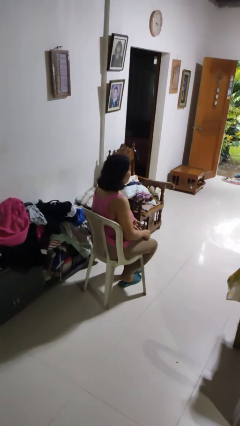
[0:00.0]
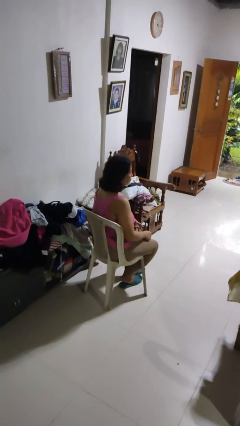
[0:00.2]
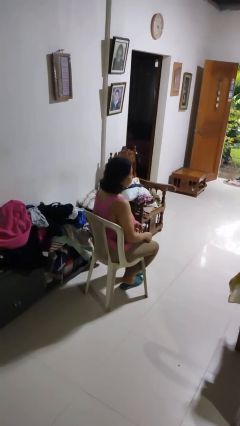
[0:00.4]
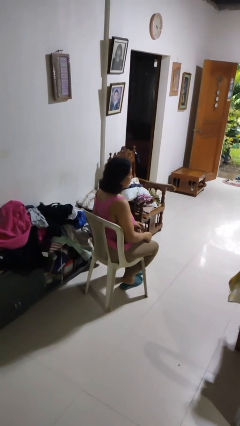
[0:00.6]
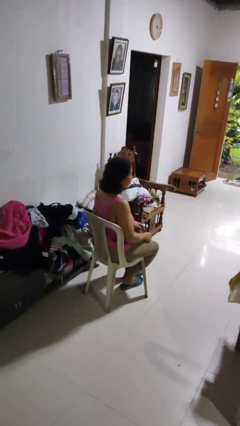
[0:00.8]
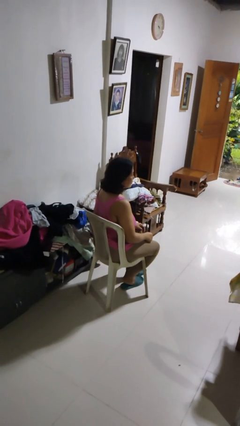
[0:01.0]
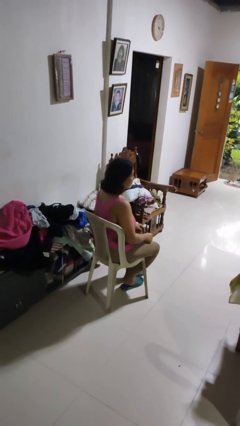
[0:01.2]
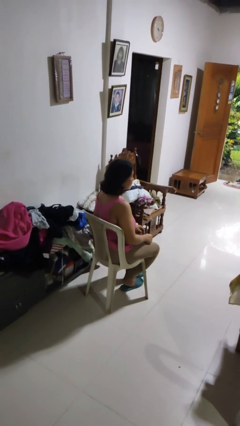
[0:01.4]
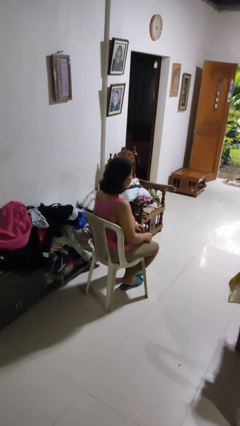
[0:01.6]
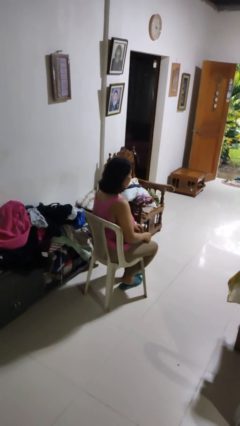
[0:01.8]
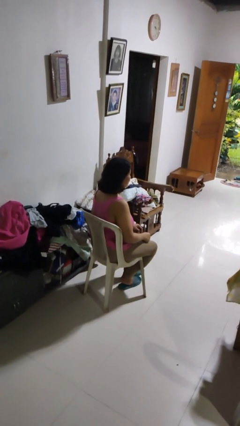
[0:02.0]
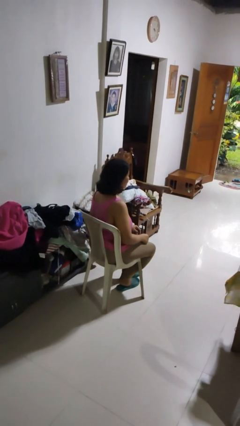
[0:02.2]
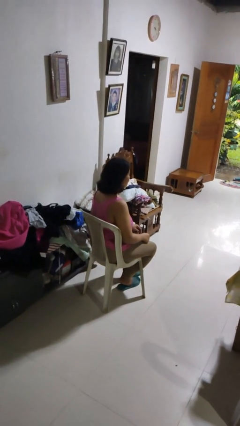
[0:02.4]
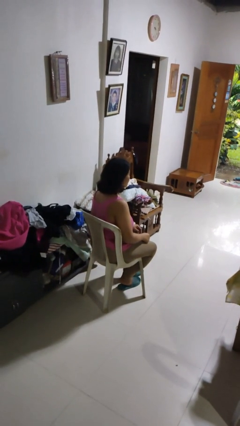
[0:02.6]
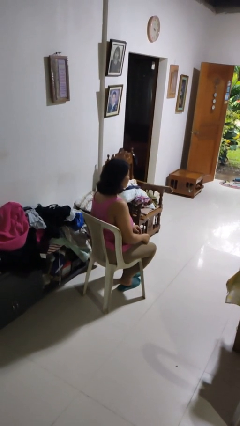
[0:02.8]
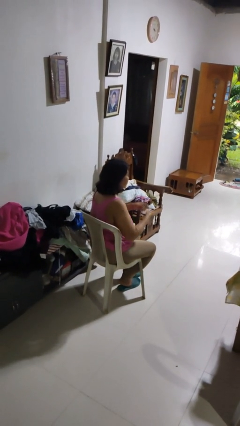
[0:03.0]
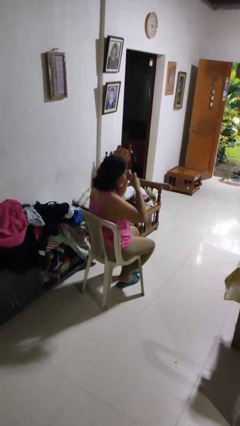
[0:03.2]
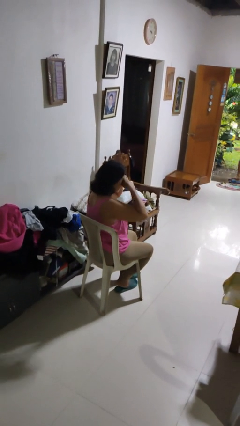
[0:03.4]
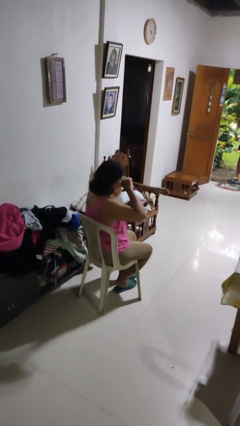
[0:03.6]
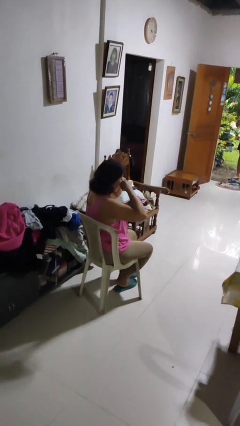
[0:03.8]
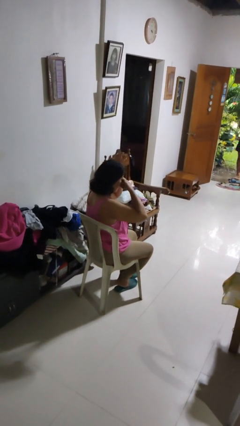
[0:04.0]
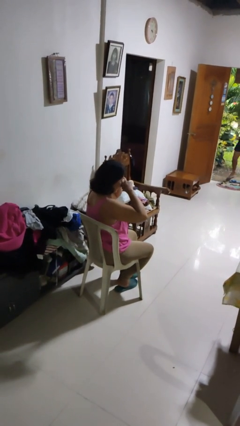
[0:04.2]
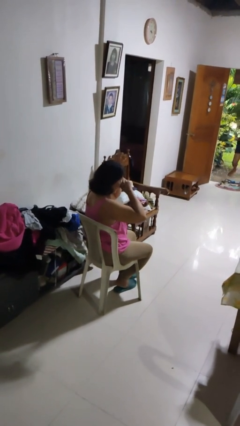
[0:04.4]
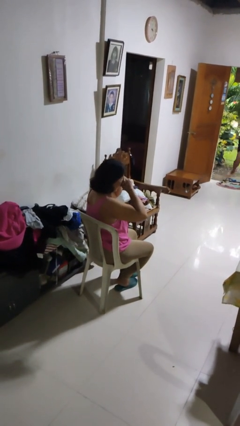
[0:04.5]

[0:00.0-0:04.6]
person rubs eyes

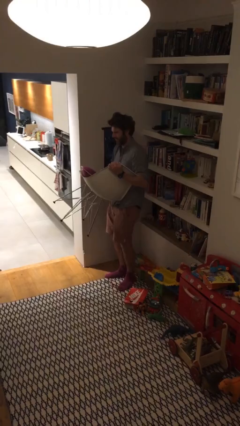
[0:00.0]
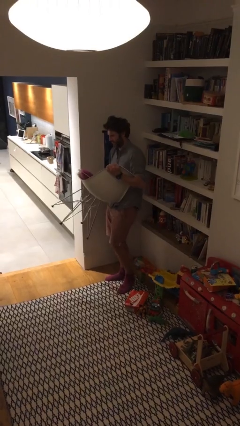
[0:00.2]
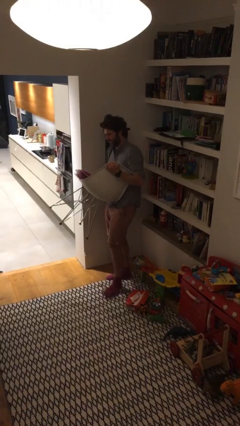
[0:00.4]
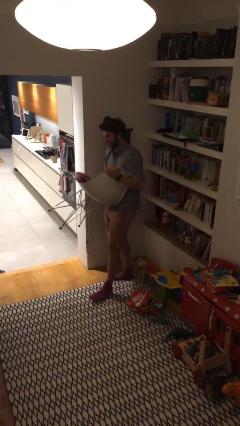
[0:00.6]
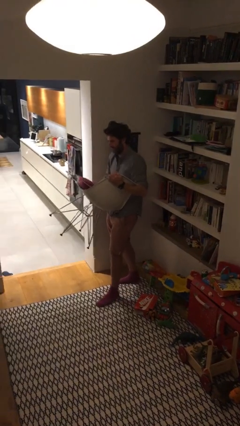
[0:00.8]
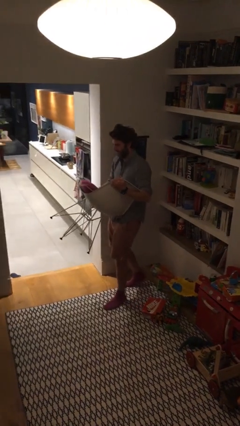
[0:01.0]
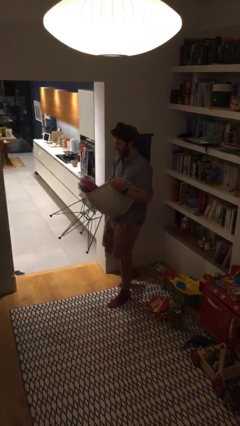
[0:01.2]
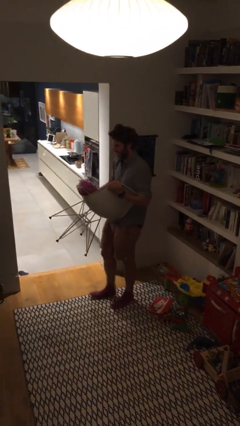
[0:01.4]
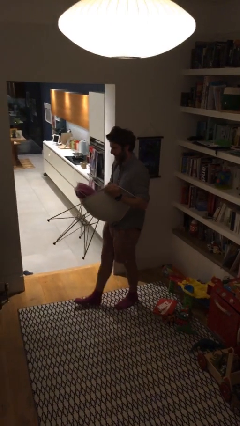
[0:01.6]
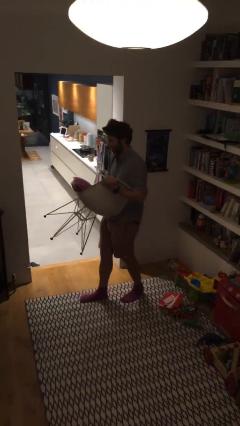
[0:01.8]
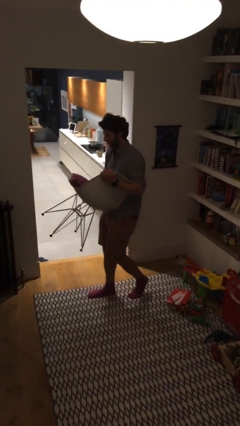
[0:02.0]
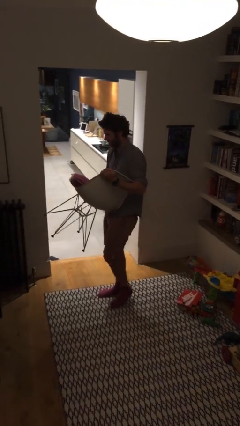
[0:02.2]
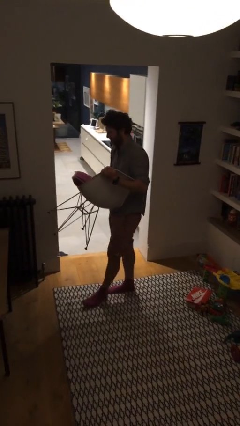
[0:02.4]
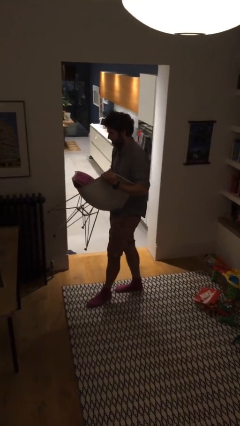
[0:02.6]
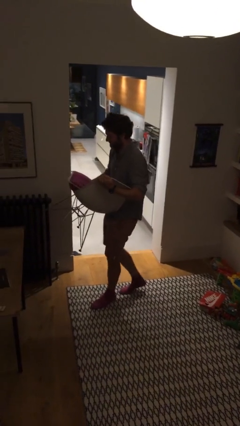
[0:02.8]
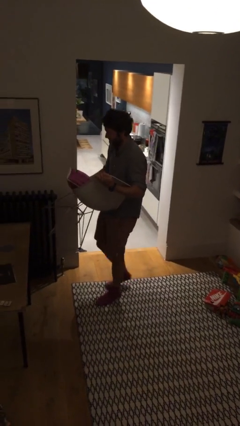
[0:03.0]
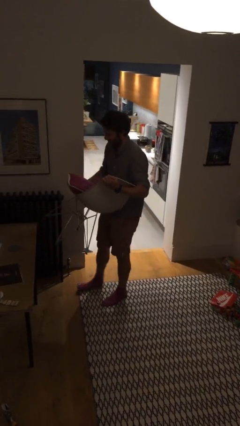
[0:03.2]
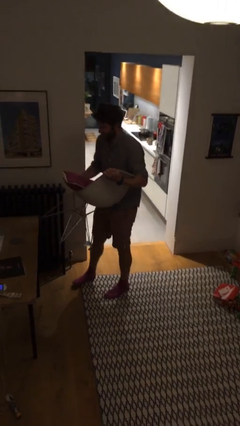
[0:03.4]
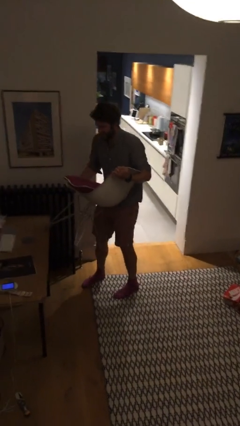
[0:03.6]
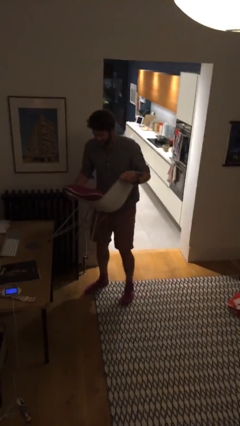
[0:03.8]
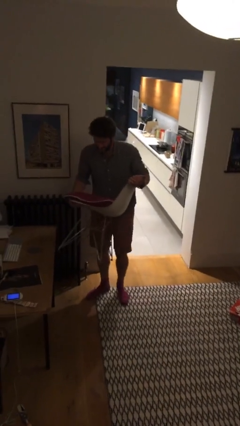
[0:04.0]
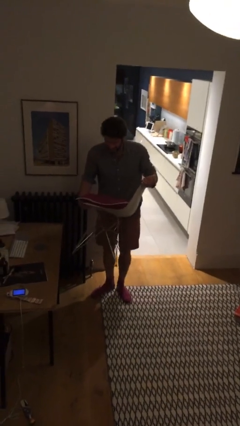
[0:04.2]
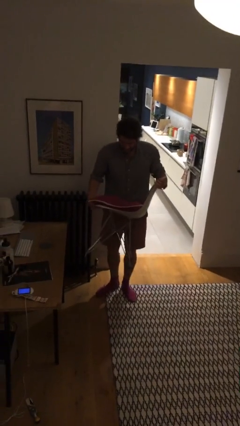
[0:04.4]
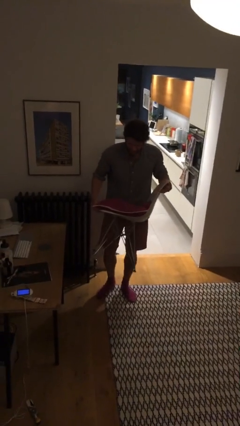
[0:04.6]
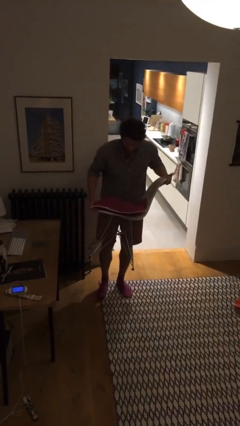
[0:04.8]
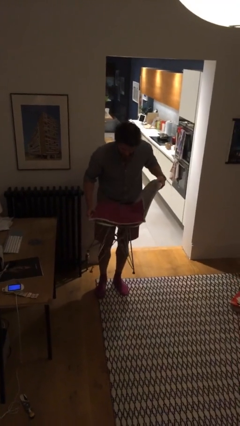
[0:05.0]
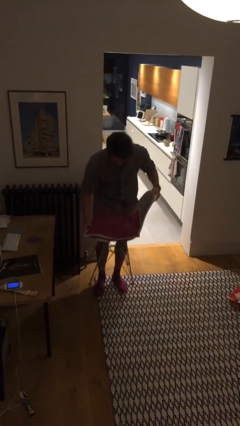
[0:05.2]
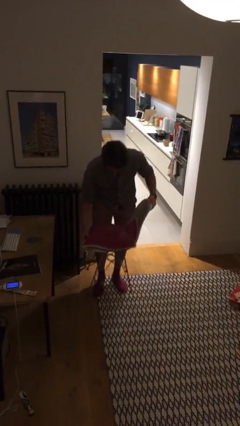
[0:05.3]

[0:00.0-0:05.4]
person carries heavy object

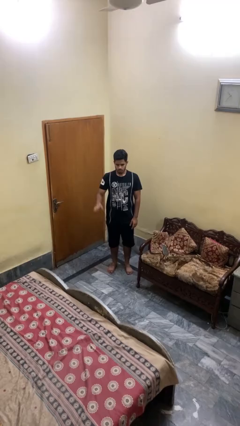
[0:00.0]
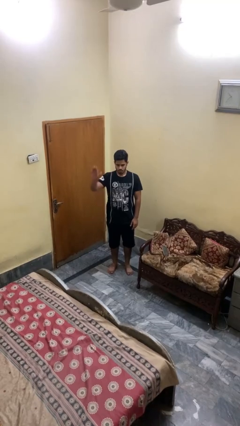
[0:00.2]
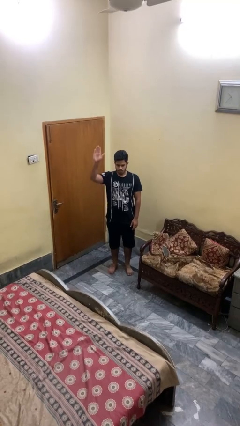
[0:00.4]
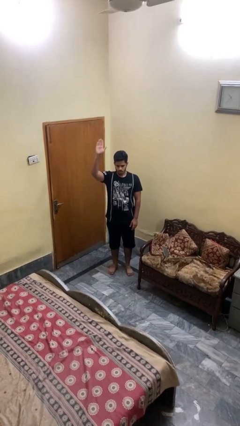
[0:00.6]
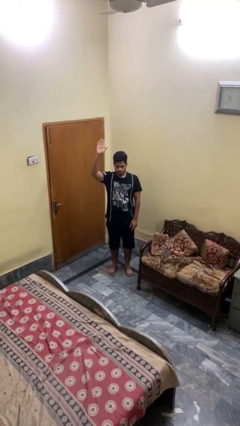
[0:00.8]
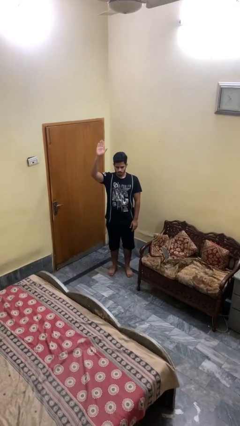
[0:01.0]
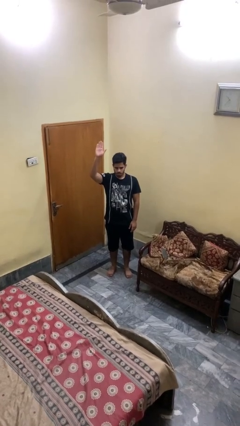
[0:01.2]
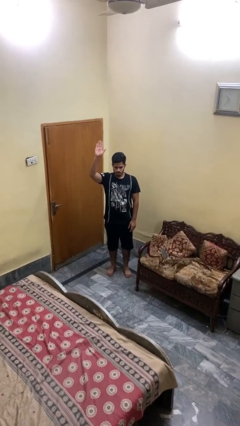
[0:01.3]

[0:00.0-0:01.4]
person gestures raise hand

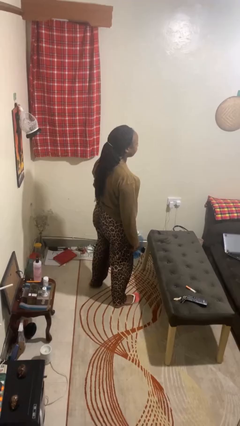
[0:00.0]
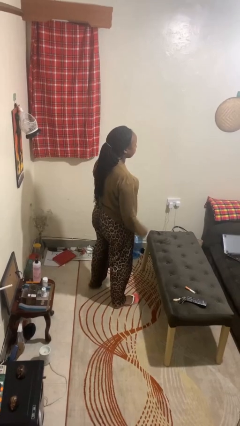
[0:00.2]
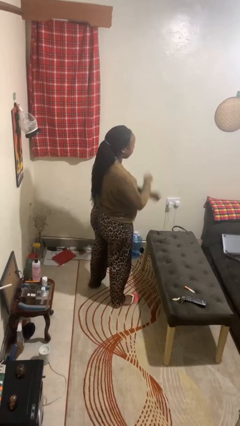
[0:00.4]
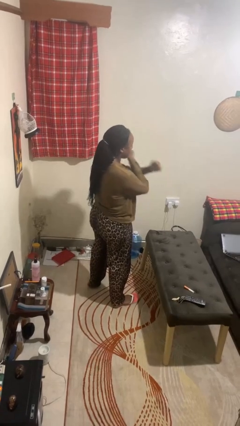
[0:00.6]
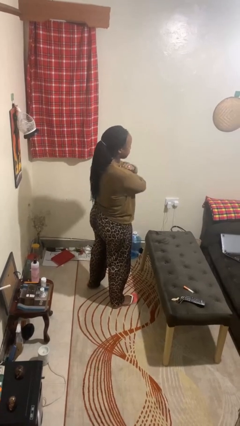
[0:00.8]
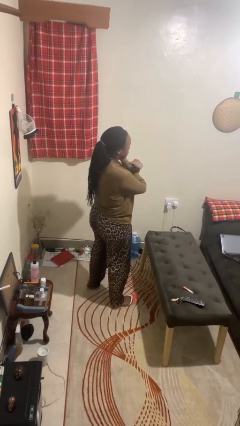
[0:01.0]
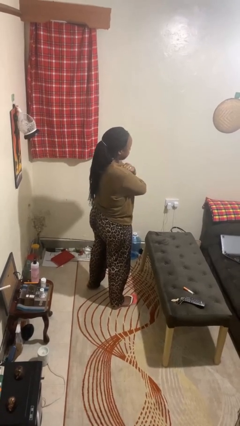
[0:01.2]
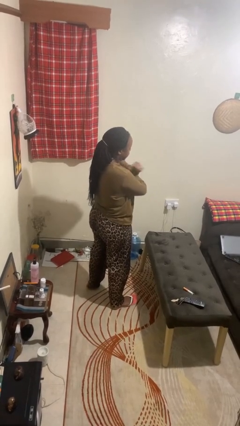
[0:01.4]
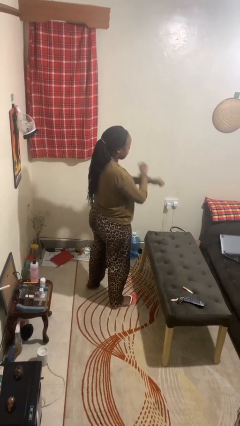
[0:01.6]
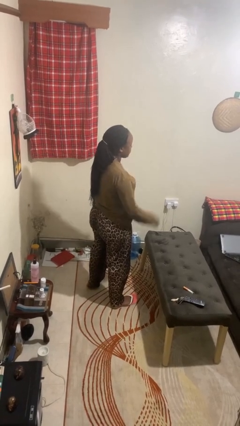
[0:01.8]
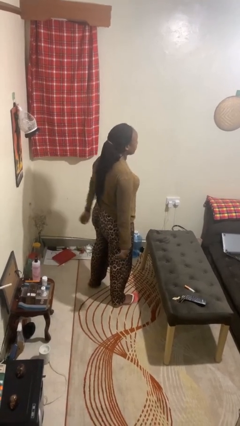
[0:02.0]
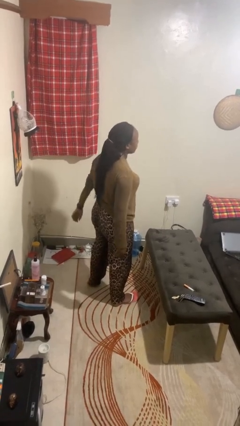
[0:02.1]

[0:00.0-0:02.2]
person gestures arms x

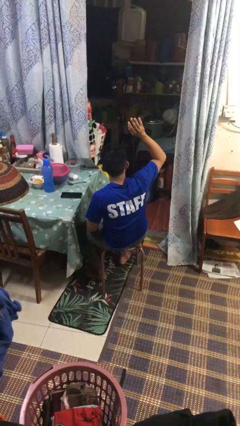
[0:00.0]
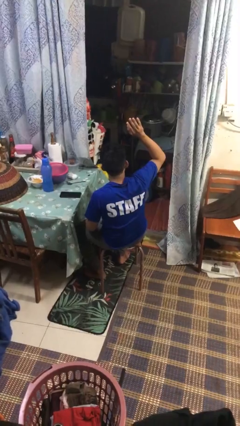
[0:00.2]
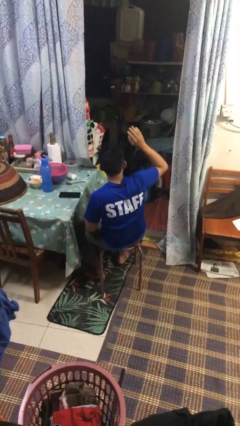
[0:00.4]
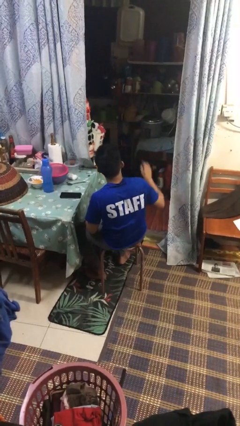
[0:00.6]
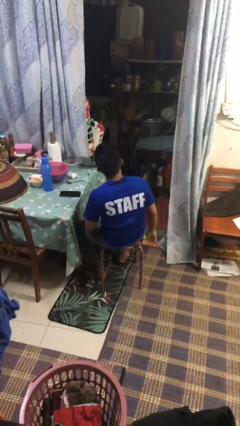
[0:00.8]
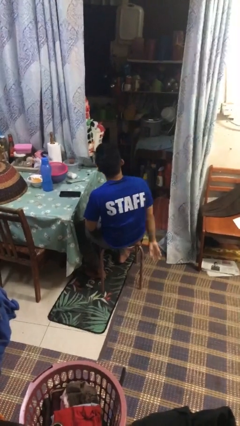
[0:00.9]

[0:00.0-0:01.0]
person gestures lower hand

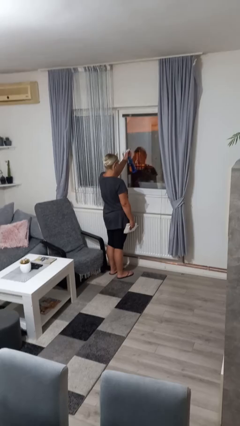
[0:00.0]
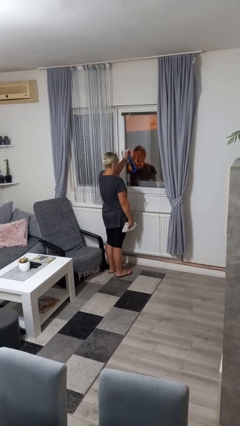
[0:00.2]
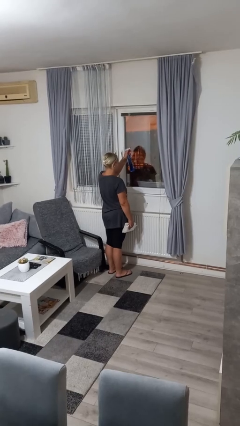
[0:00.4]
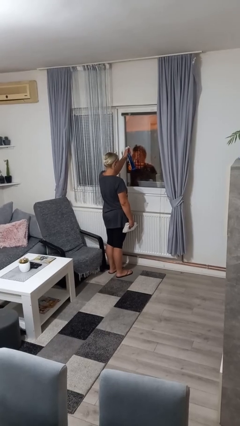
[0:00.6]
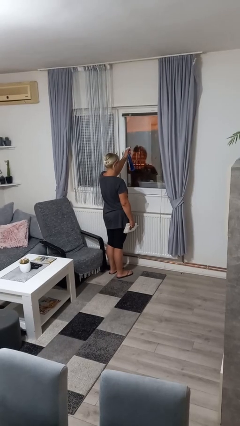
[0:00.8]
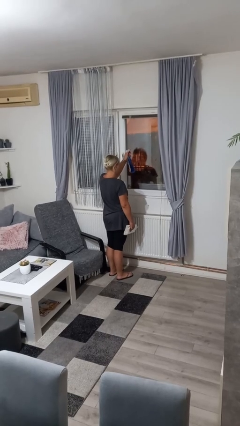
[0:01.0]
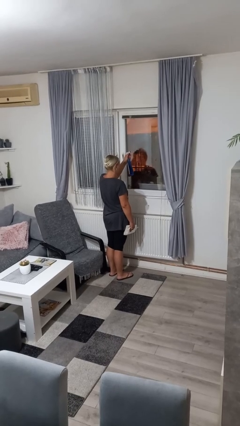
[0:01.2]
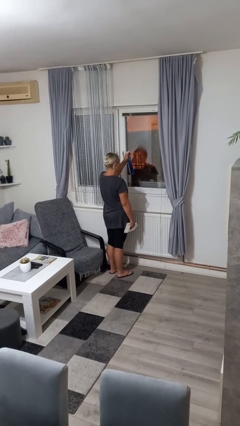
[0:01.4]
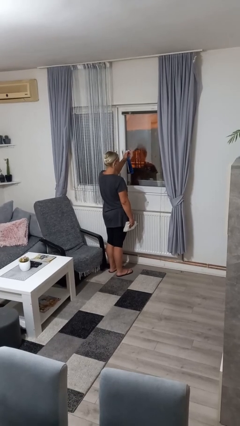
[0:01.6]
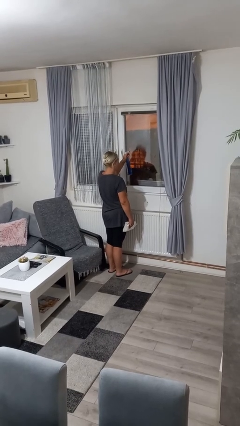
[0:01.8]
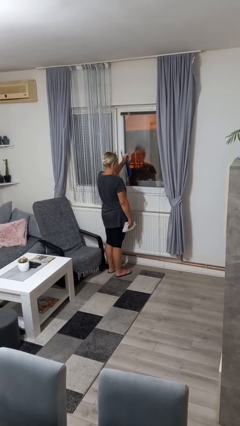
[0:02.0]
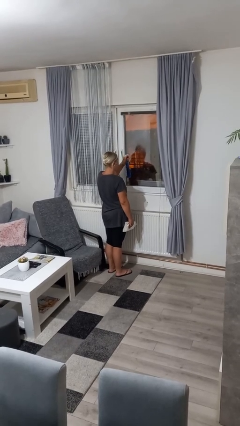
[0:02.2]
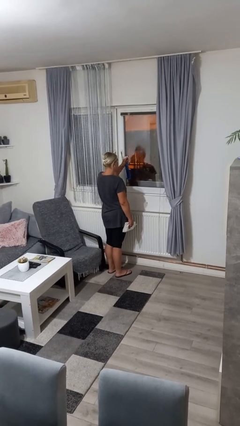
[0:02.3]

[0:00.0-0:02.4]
person sprays from bottle

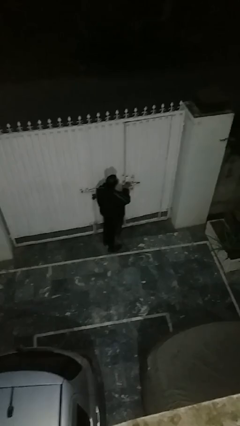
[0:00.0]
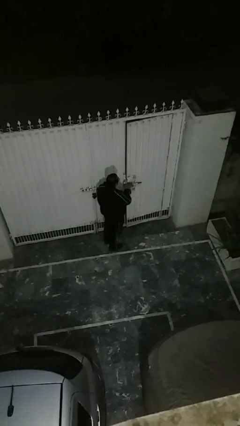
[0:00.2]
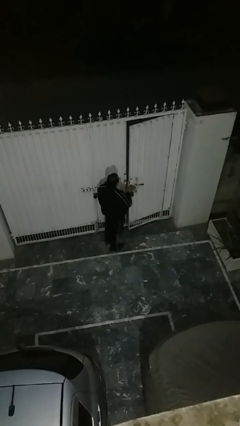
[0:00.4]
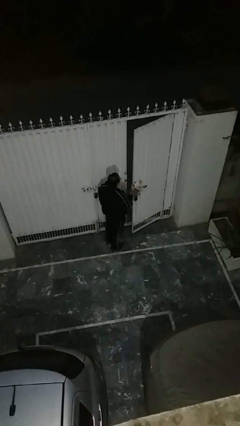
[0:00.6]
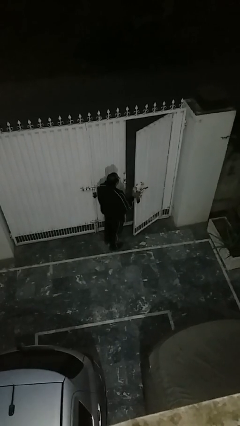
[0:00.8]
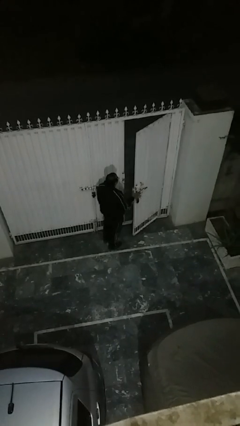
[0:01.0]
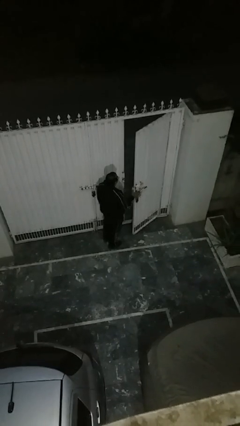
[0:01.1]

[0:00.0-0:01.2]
person opens facility door
